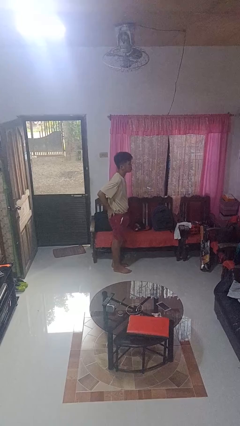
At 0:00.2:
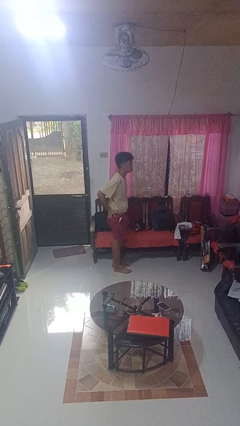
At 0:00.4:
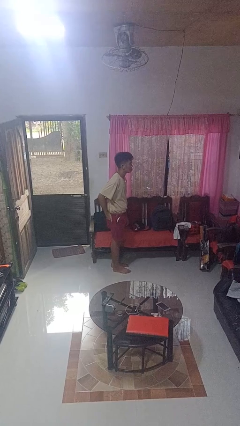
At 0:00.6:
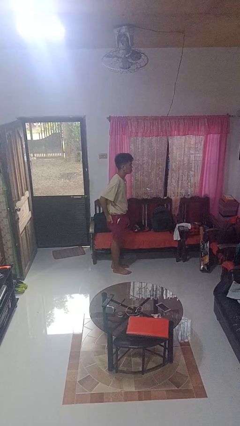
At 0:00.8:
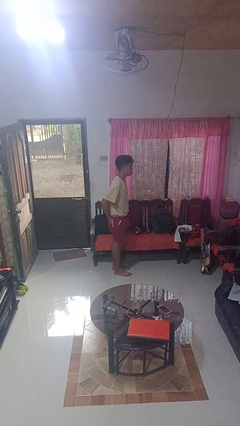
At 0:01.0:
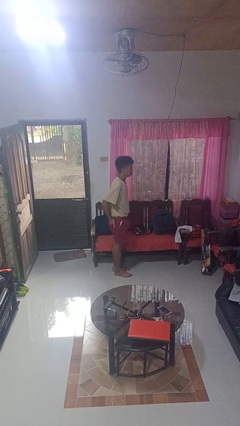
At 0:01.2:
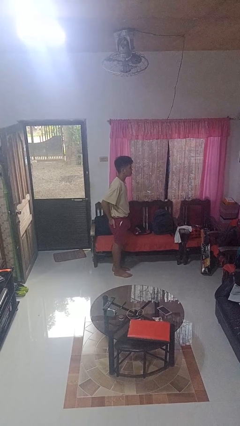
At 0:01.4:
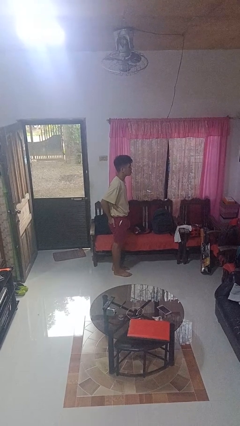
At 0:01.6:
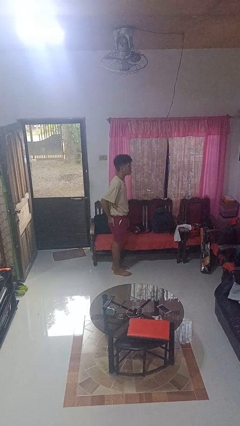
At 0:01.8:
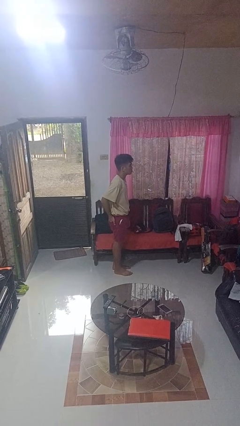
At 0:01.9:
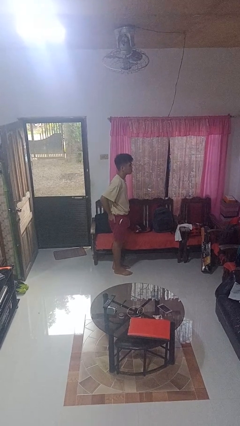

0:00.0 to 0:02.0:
person puts hands in back pockets

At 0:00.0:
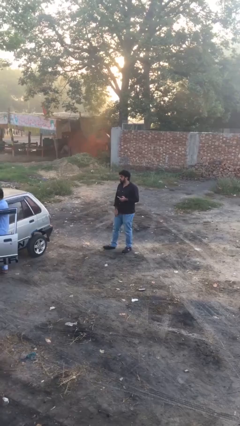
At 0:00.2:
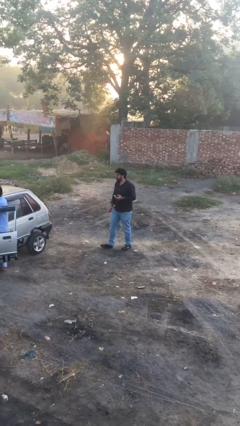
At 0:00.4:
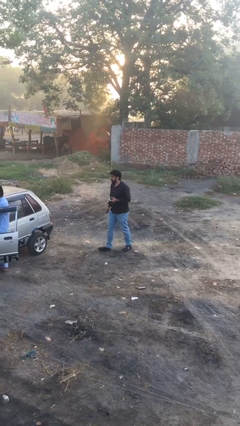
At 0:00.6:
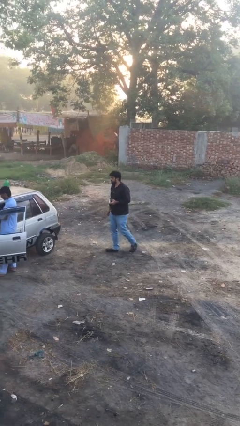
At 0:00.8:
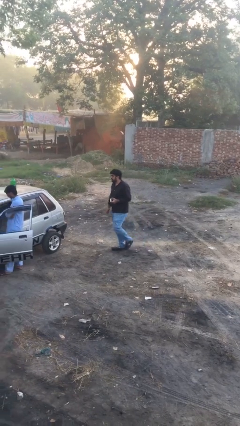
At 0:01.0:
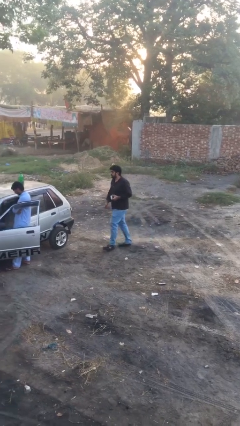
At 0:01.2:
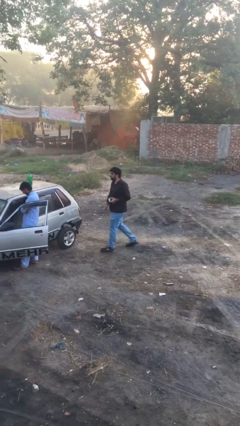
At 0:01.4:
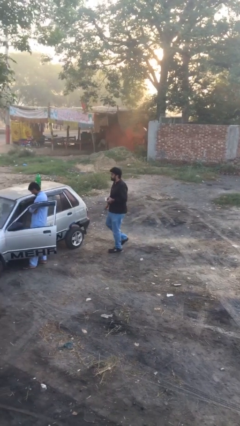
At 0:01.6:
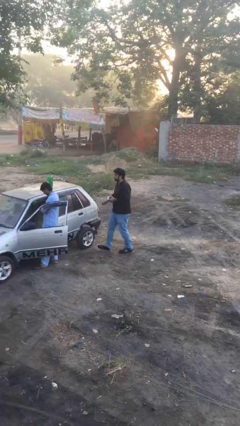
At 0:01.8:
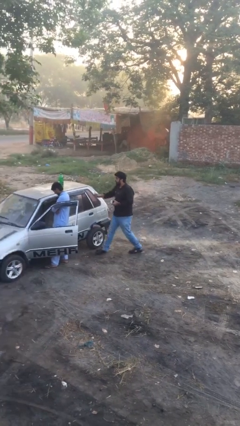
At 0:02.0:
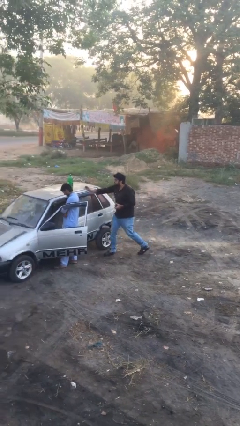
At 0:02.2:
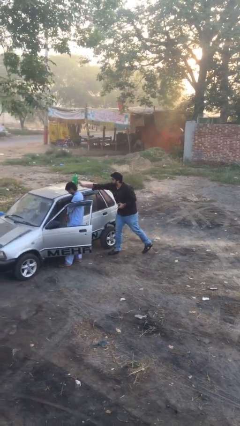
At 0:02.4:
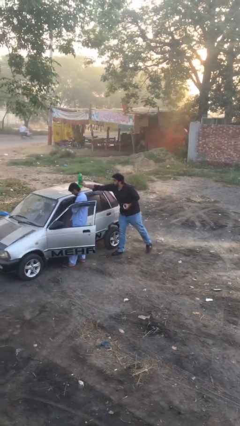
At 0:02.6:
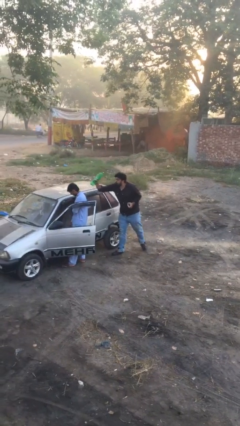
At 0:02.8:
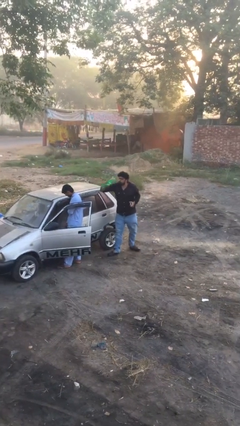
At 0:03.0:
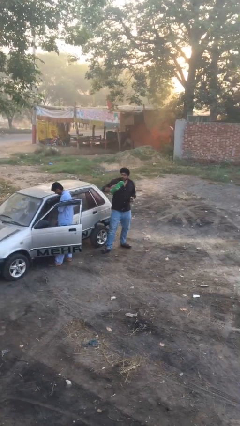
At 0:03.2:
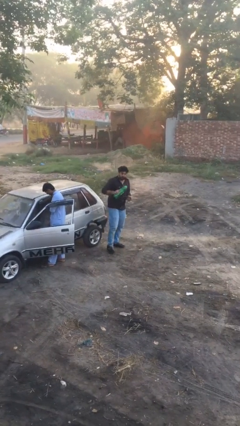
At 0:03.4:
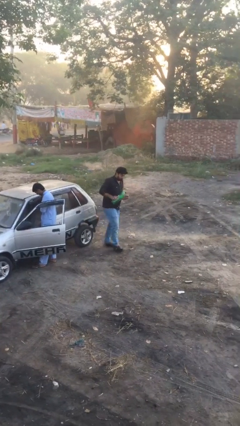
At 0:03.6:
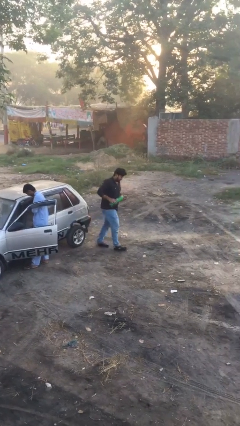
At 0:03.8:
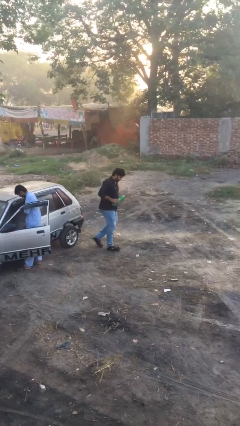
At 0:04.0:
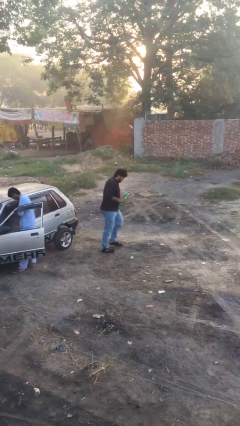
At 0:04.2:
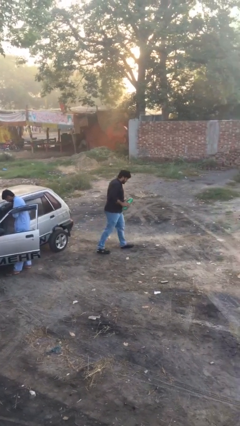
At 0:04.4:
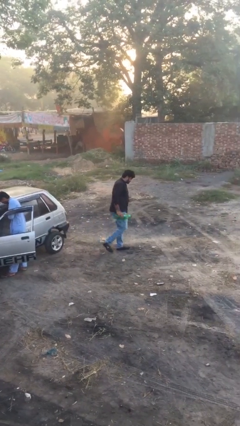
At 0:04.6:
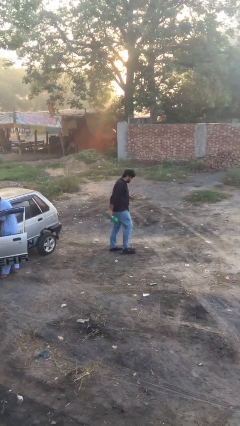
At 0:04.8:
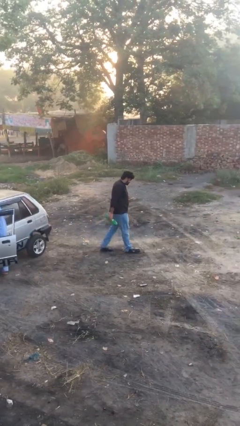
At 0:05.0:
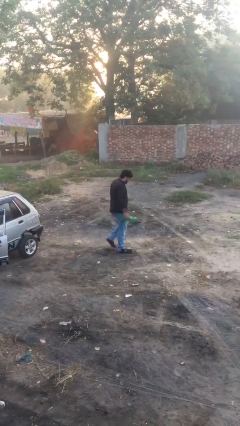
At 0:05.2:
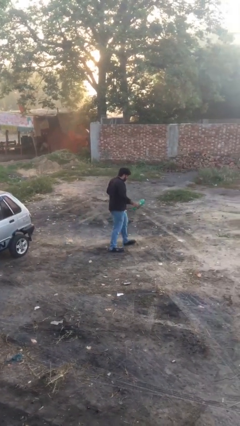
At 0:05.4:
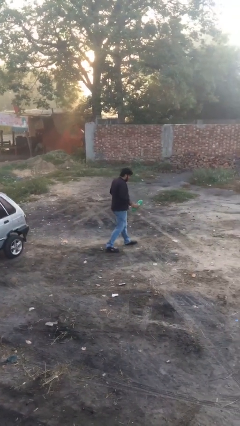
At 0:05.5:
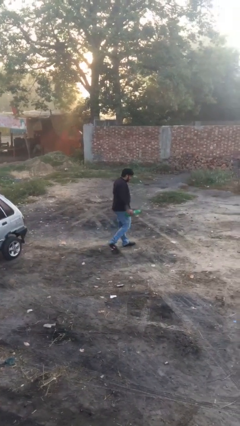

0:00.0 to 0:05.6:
person steals object from person

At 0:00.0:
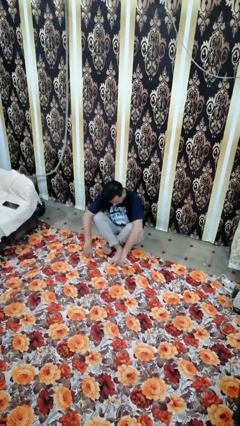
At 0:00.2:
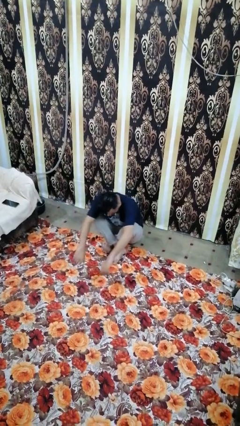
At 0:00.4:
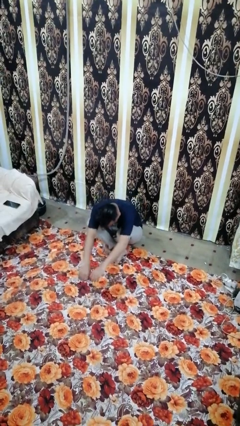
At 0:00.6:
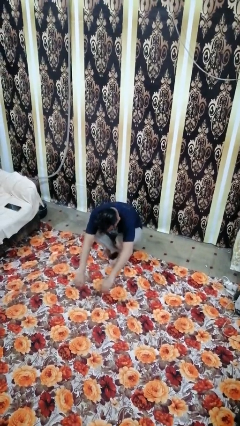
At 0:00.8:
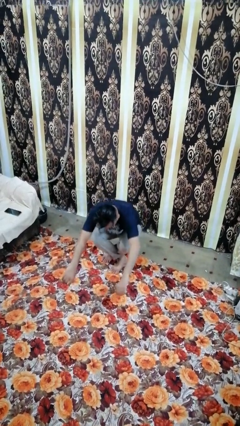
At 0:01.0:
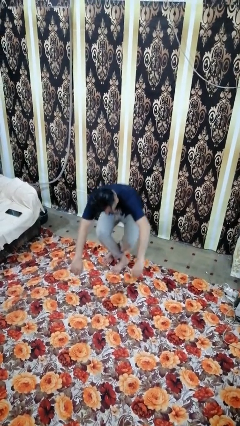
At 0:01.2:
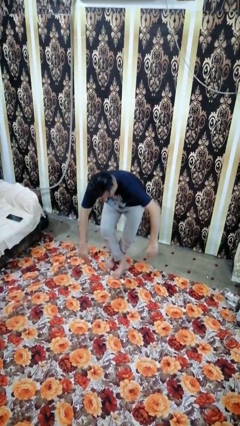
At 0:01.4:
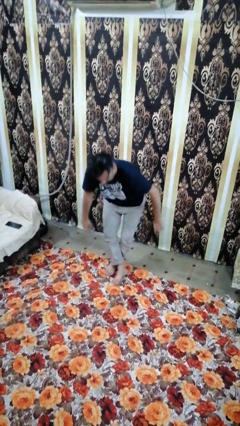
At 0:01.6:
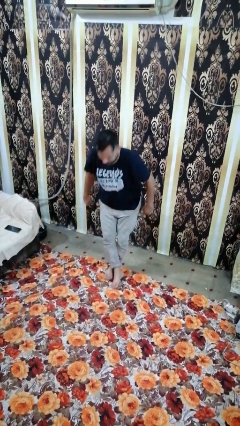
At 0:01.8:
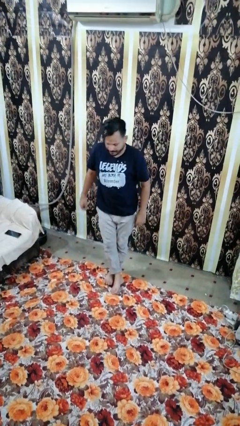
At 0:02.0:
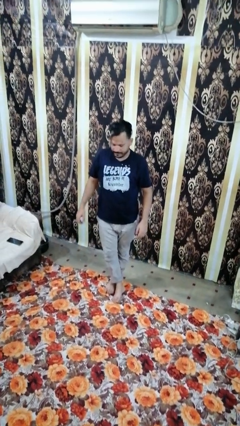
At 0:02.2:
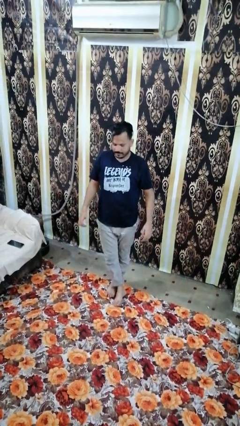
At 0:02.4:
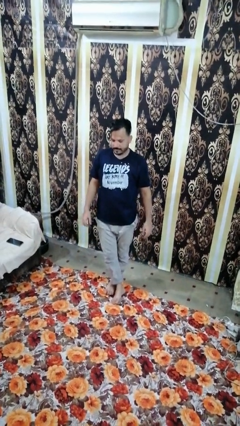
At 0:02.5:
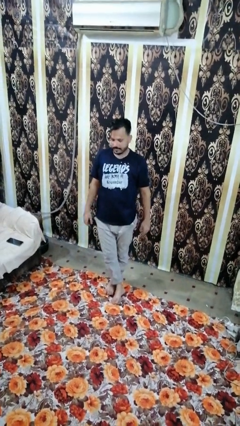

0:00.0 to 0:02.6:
person stands up from floor

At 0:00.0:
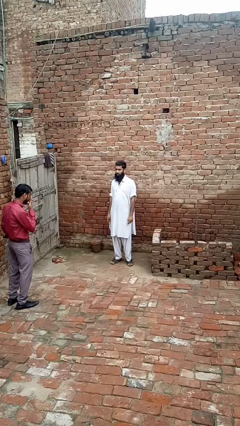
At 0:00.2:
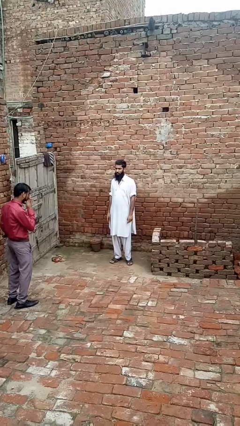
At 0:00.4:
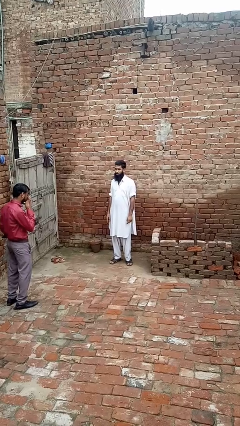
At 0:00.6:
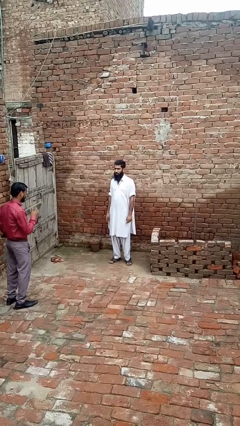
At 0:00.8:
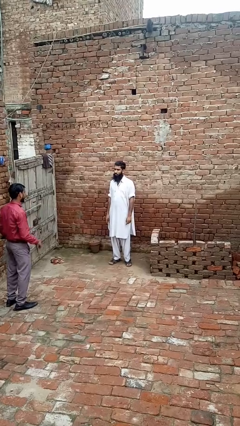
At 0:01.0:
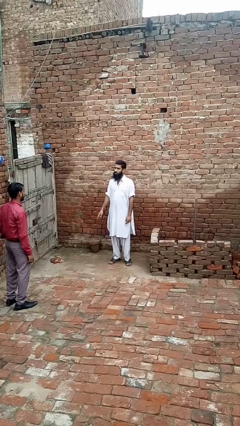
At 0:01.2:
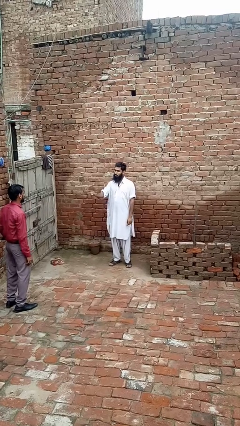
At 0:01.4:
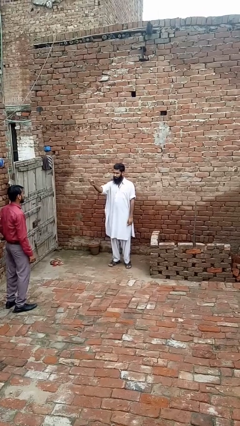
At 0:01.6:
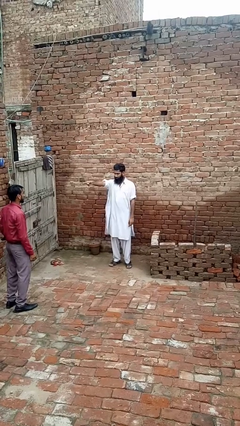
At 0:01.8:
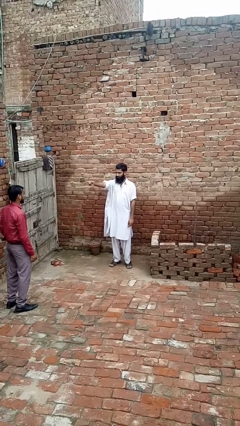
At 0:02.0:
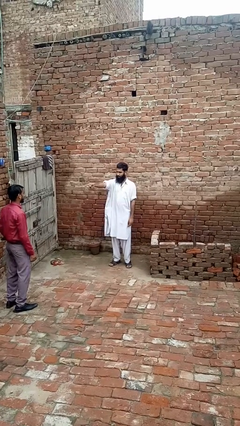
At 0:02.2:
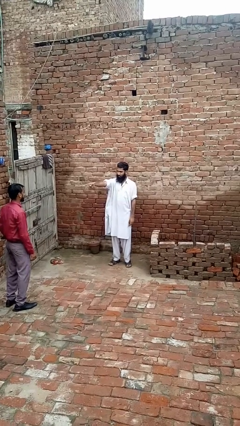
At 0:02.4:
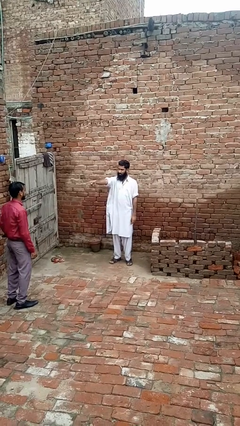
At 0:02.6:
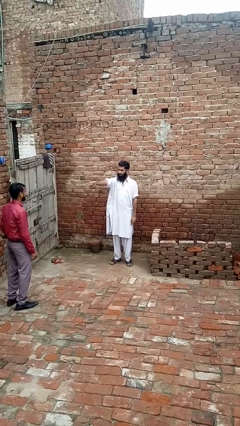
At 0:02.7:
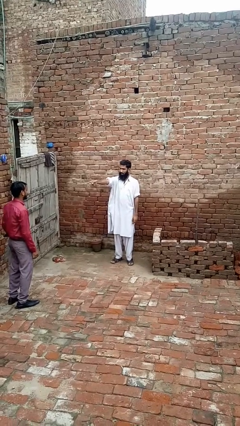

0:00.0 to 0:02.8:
person points at person

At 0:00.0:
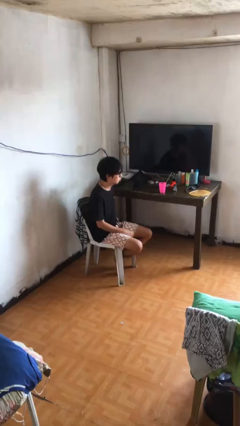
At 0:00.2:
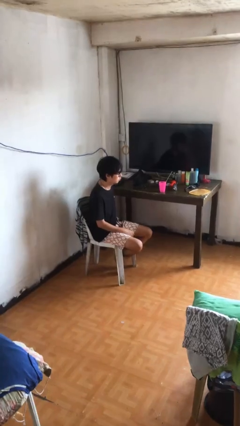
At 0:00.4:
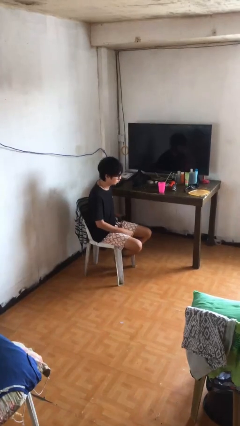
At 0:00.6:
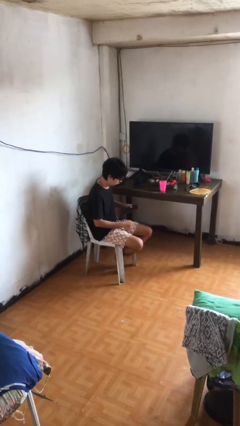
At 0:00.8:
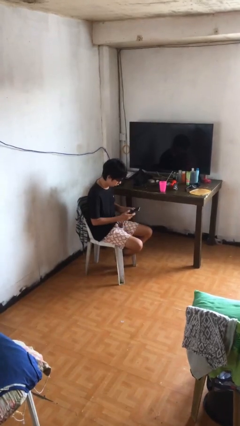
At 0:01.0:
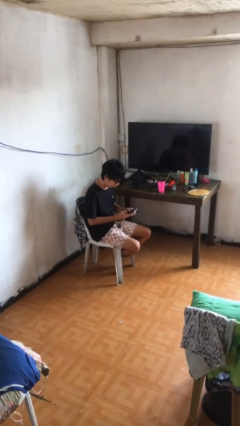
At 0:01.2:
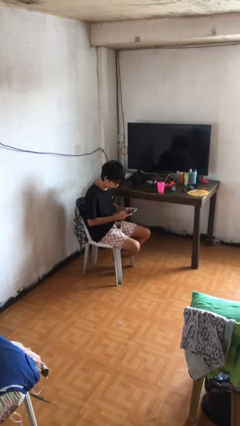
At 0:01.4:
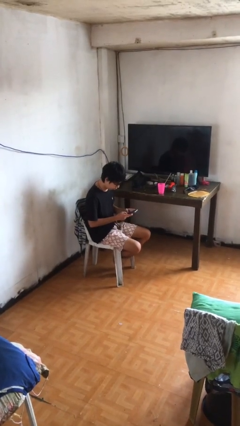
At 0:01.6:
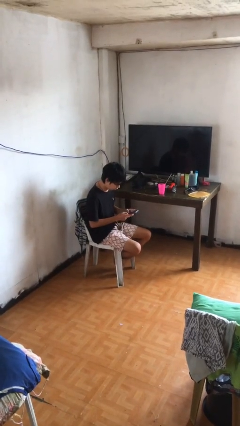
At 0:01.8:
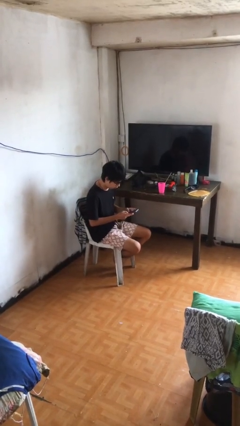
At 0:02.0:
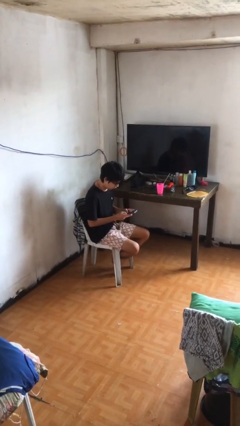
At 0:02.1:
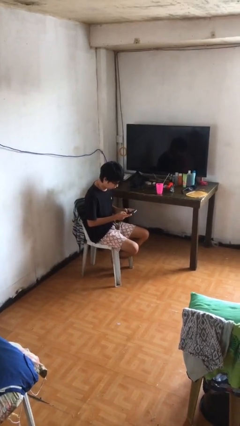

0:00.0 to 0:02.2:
person takes phone from pocket

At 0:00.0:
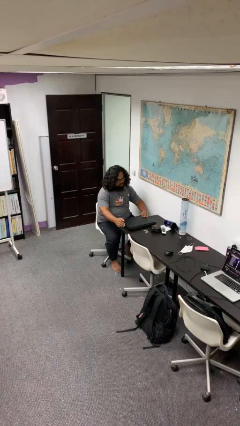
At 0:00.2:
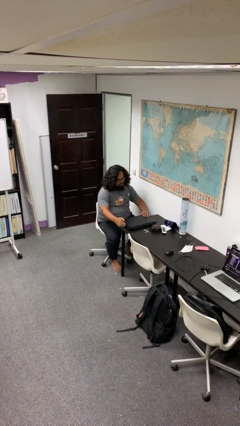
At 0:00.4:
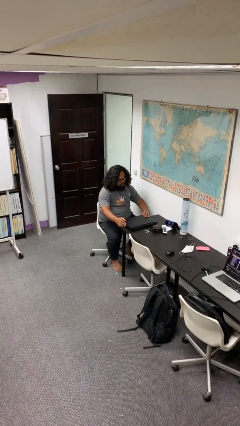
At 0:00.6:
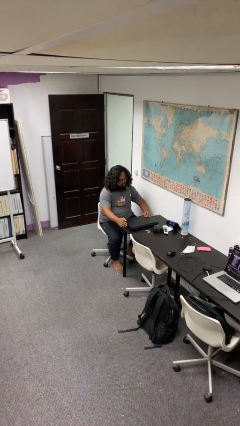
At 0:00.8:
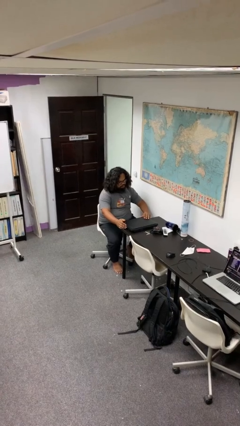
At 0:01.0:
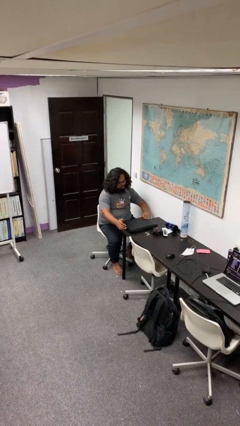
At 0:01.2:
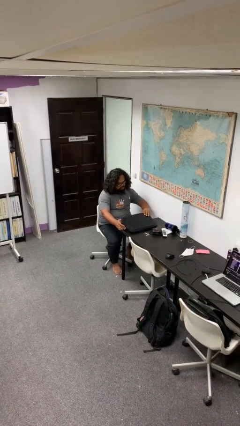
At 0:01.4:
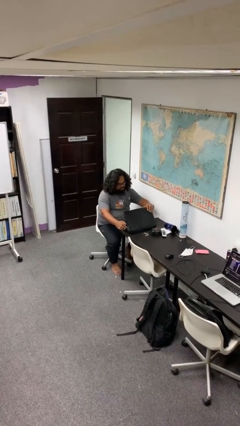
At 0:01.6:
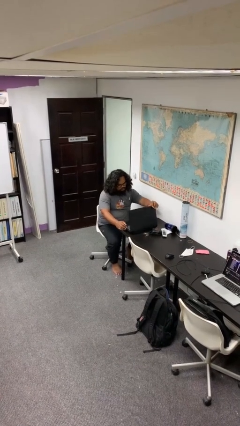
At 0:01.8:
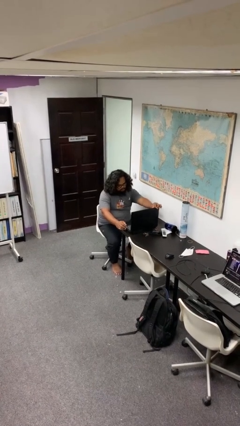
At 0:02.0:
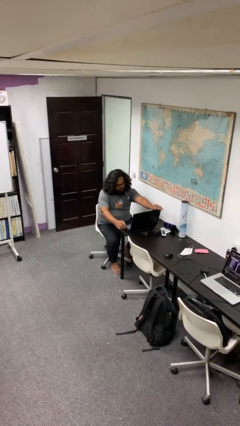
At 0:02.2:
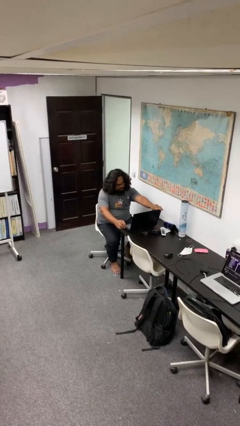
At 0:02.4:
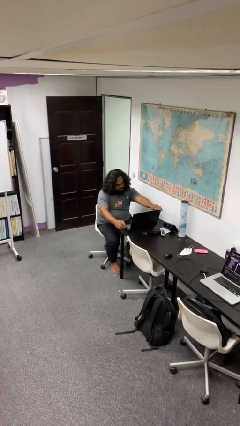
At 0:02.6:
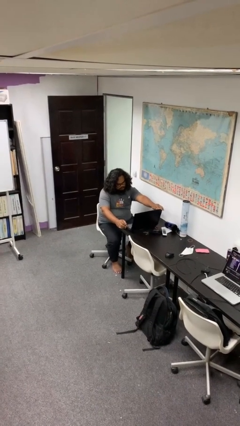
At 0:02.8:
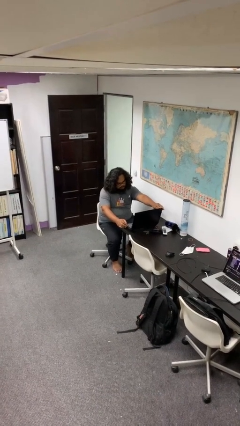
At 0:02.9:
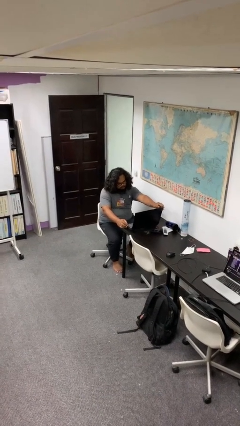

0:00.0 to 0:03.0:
person opens laptop
